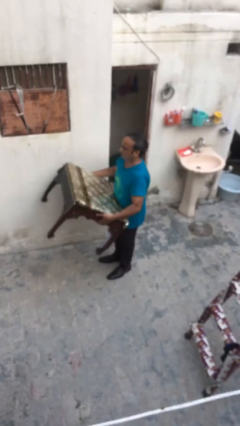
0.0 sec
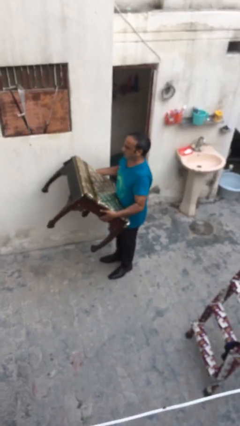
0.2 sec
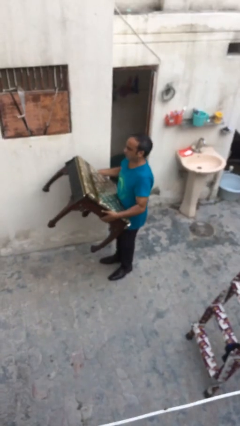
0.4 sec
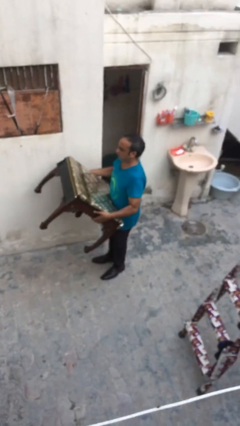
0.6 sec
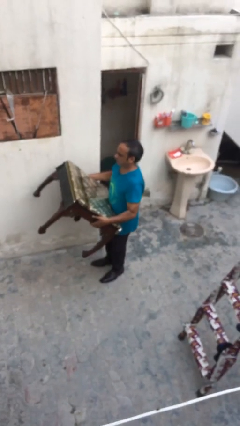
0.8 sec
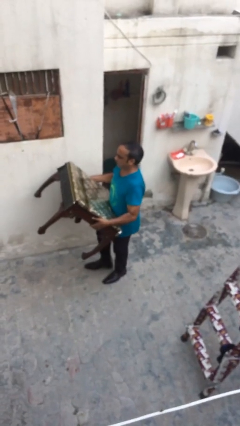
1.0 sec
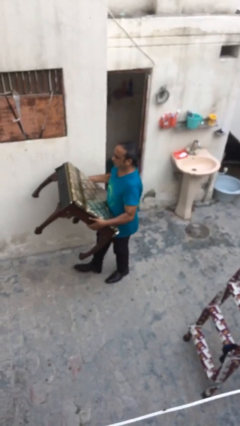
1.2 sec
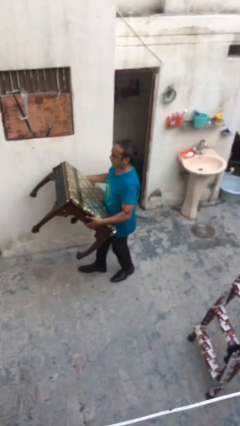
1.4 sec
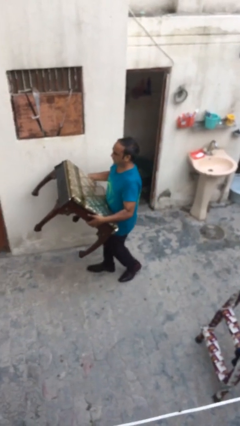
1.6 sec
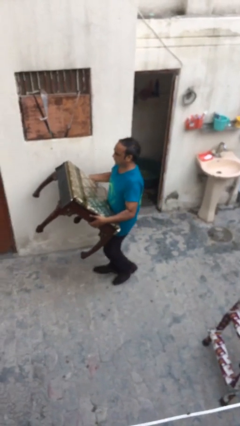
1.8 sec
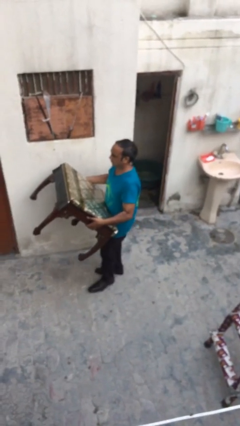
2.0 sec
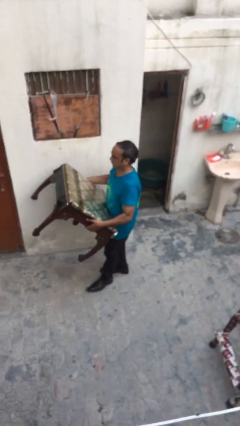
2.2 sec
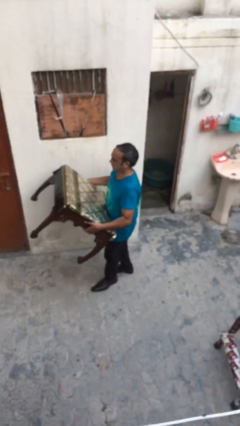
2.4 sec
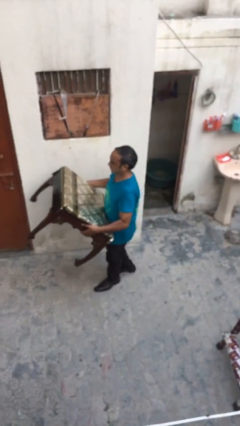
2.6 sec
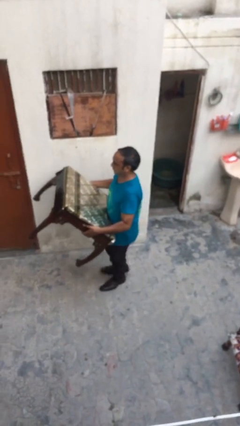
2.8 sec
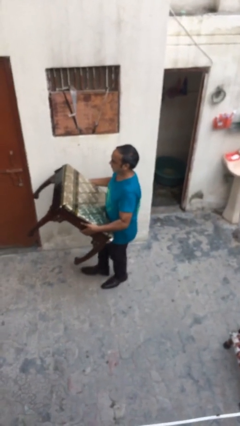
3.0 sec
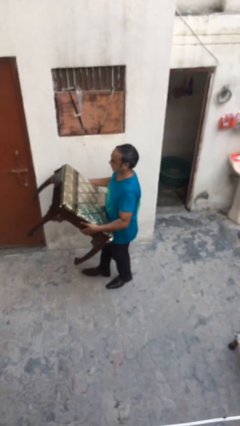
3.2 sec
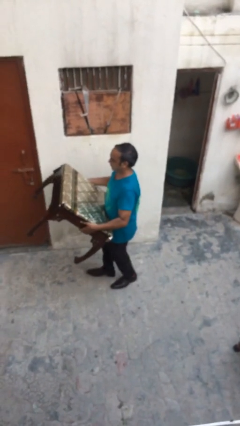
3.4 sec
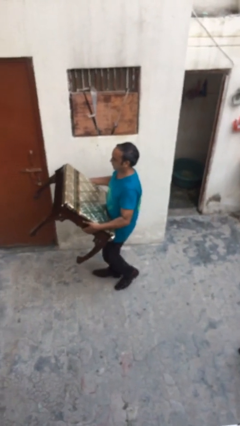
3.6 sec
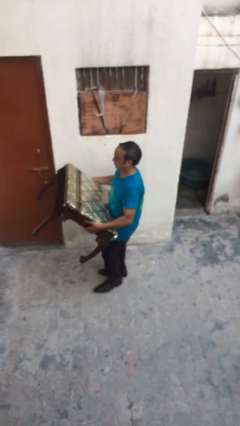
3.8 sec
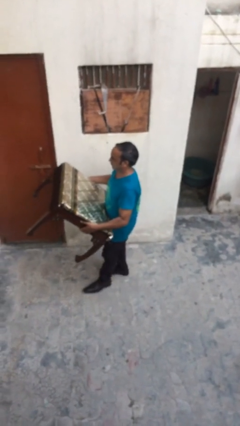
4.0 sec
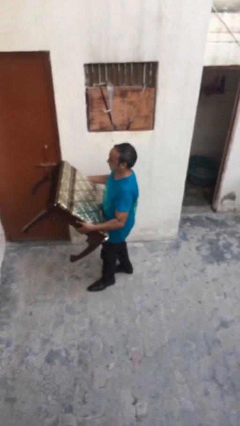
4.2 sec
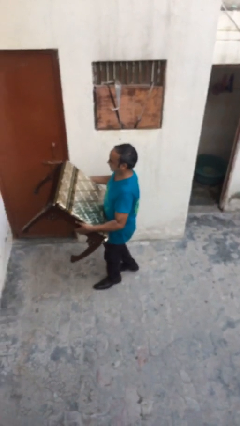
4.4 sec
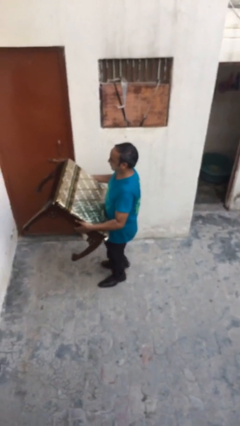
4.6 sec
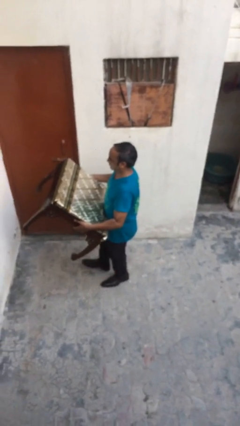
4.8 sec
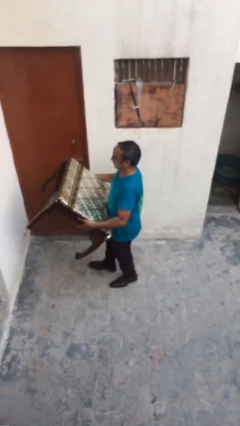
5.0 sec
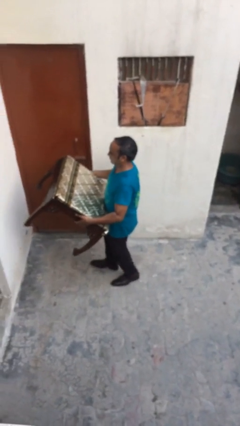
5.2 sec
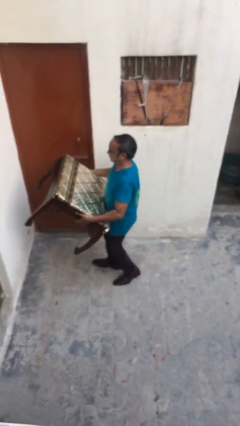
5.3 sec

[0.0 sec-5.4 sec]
person carries heavy object

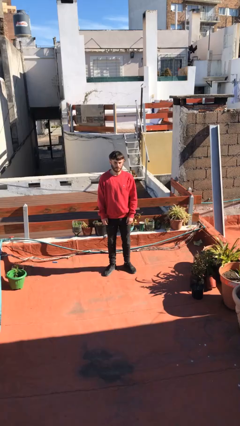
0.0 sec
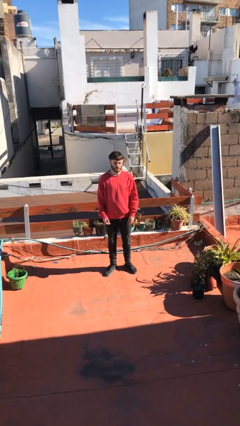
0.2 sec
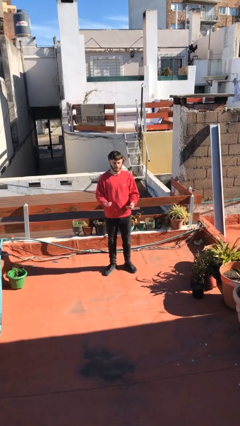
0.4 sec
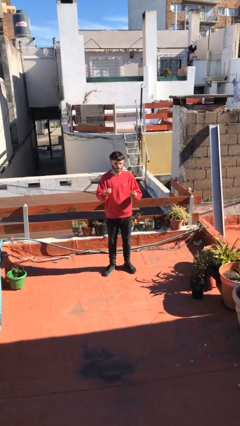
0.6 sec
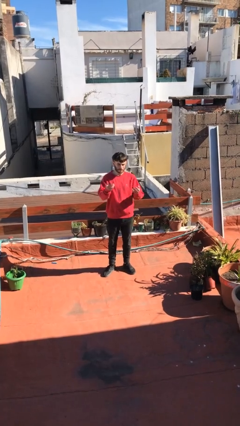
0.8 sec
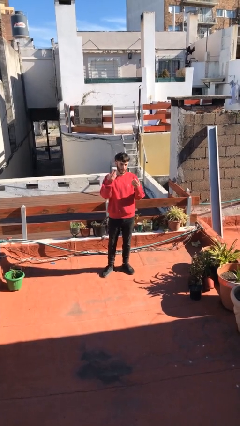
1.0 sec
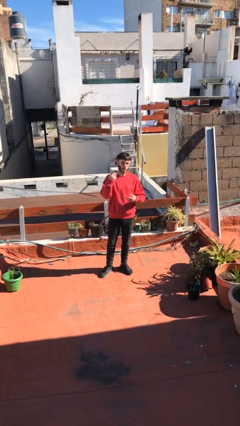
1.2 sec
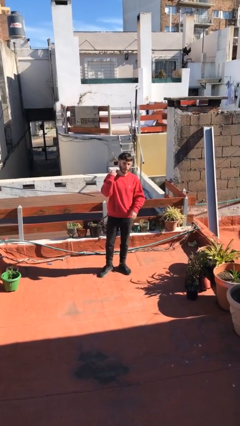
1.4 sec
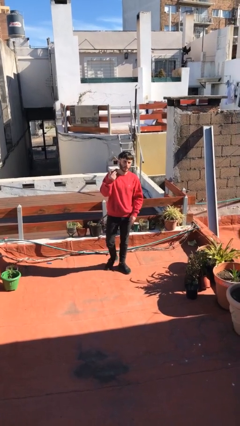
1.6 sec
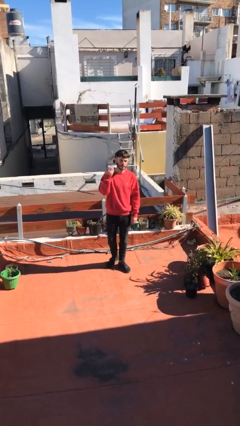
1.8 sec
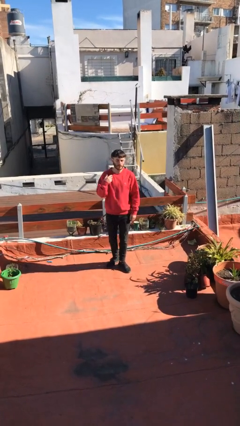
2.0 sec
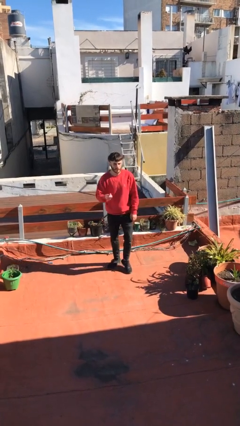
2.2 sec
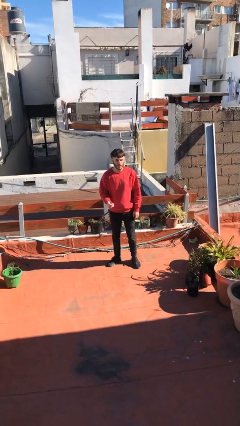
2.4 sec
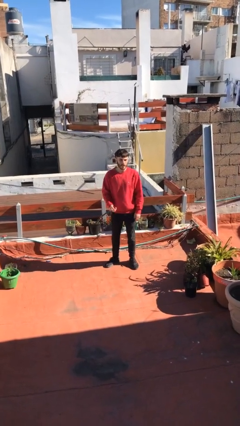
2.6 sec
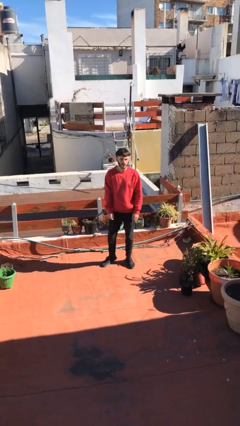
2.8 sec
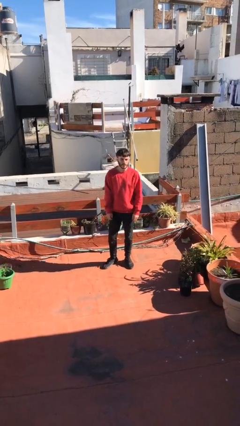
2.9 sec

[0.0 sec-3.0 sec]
person gestures come here

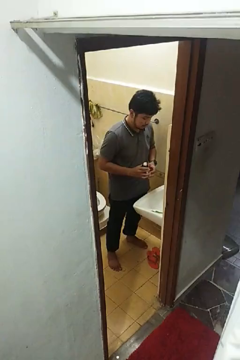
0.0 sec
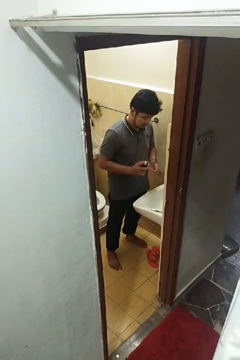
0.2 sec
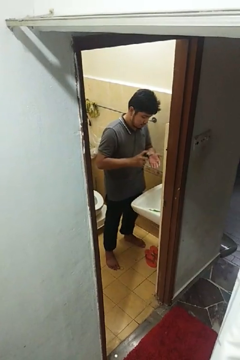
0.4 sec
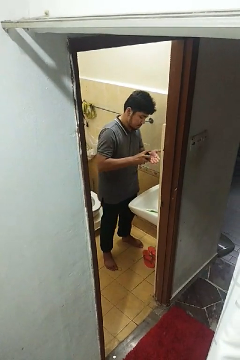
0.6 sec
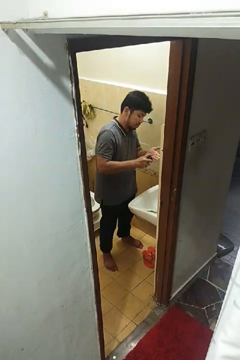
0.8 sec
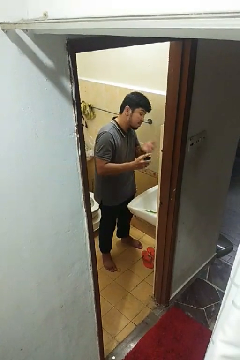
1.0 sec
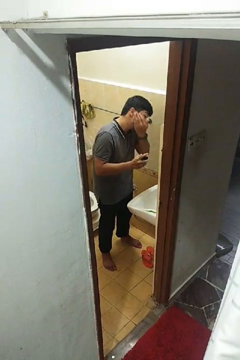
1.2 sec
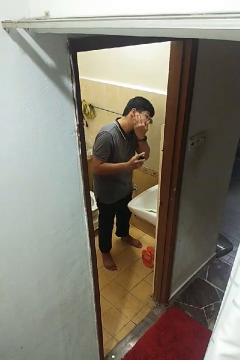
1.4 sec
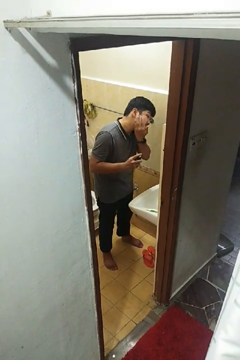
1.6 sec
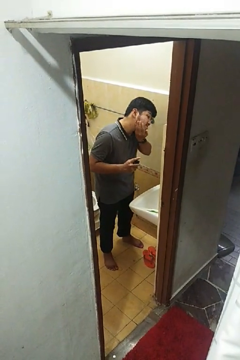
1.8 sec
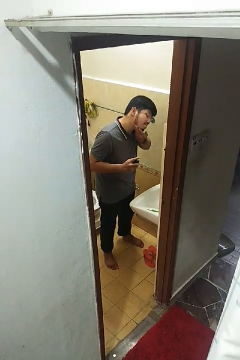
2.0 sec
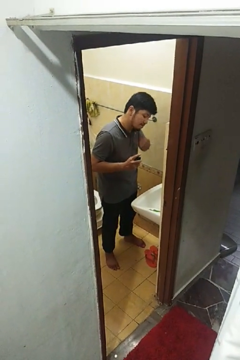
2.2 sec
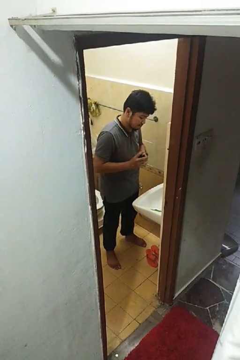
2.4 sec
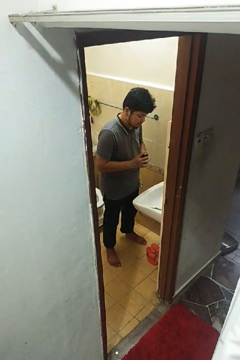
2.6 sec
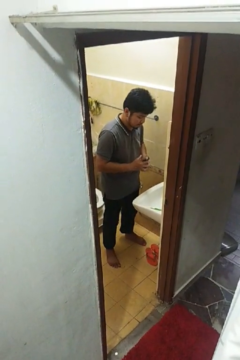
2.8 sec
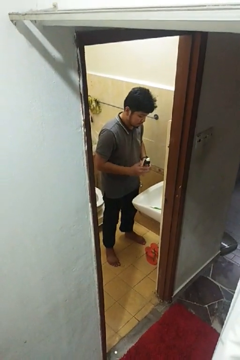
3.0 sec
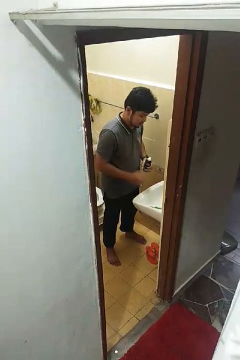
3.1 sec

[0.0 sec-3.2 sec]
person applies shaving cream

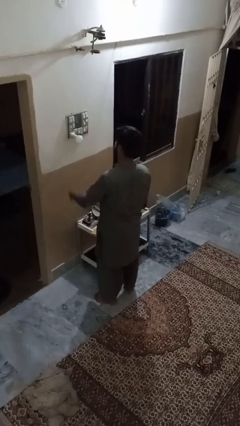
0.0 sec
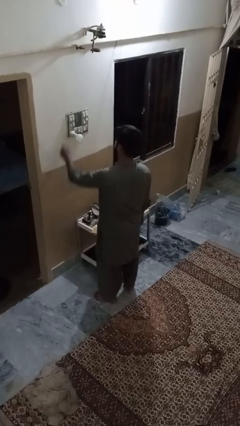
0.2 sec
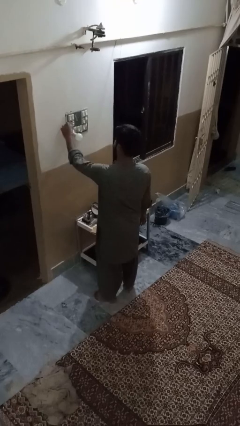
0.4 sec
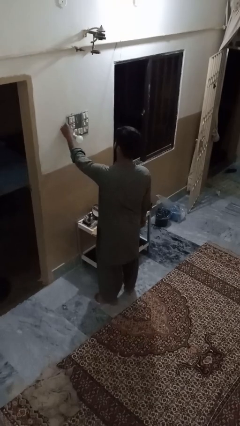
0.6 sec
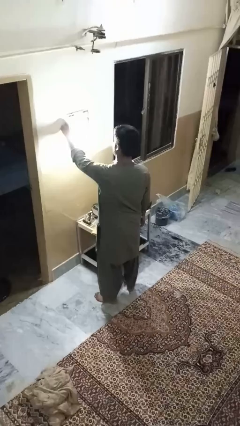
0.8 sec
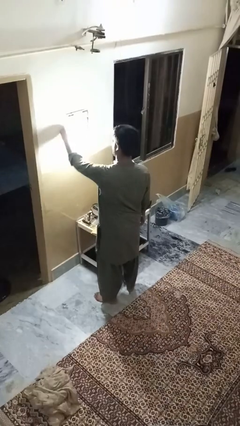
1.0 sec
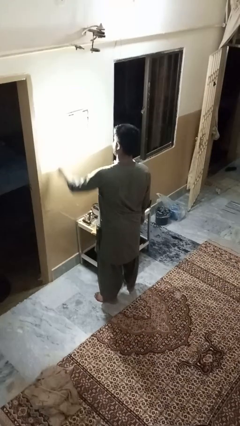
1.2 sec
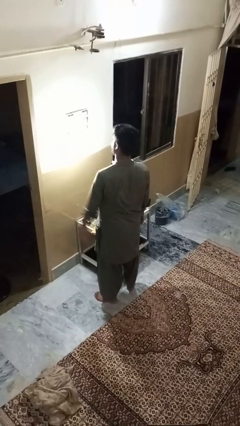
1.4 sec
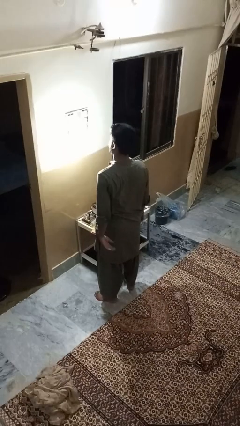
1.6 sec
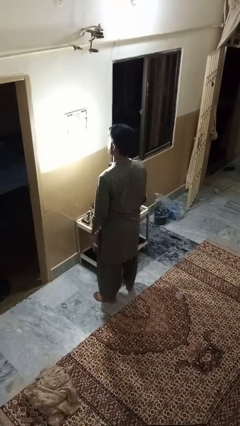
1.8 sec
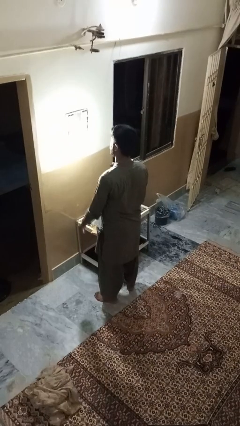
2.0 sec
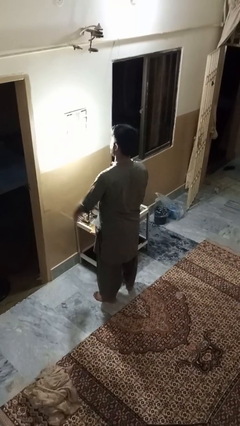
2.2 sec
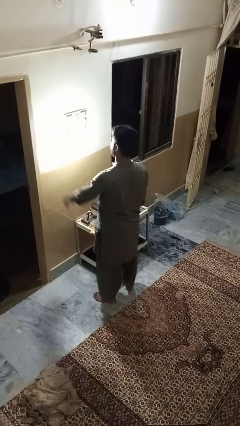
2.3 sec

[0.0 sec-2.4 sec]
person turns on lamp

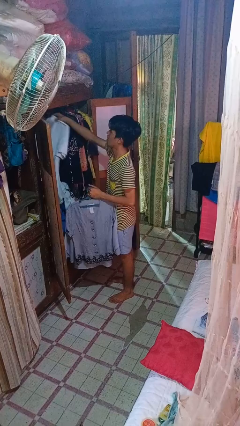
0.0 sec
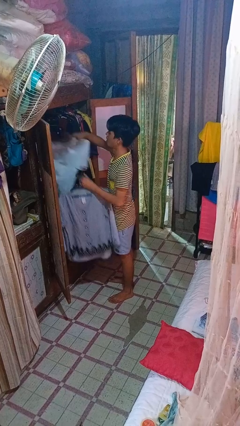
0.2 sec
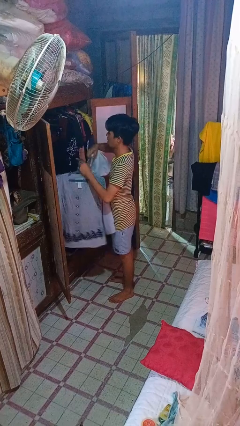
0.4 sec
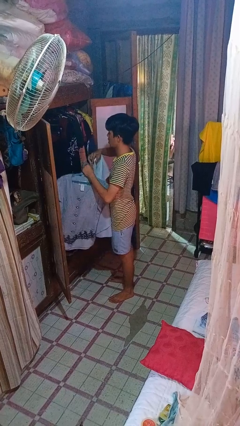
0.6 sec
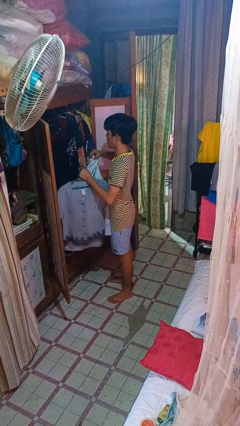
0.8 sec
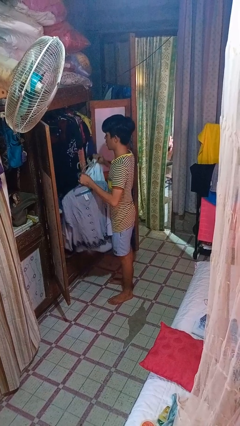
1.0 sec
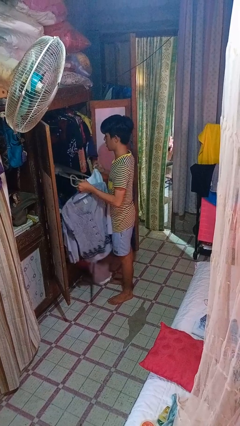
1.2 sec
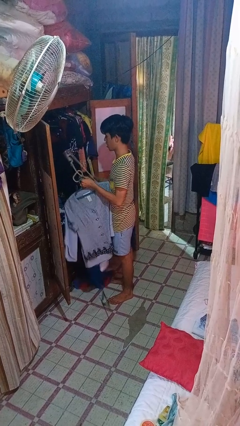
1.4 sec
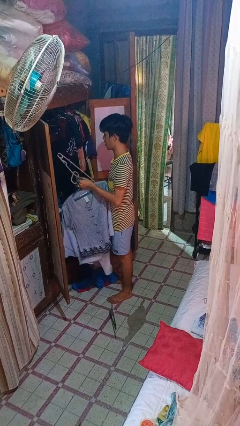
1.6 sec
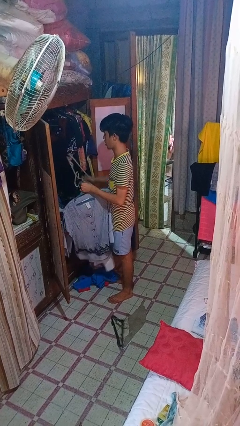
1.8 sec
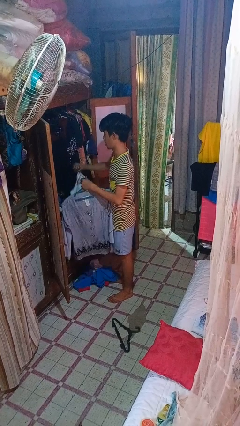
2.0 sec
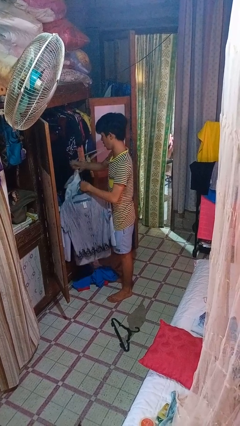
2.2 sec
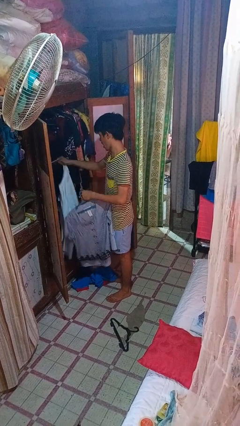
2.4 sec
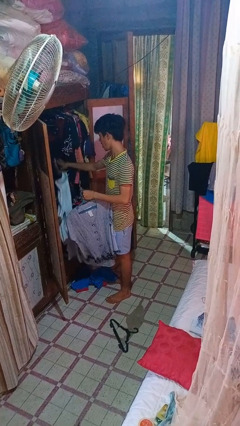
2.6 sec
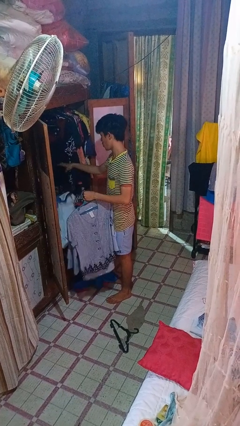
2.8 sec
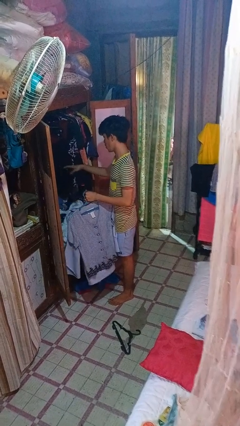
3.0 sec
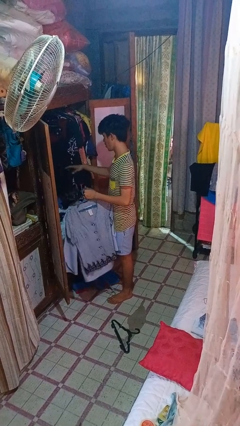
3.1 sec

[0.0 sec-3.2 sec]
person takes clothes from closet

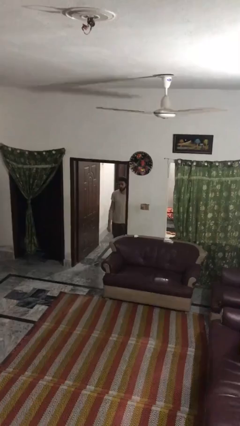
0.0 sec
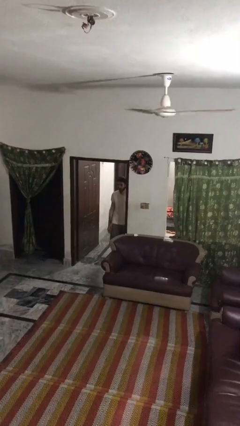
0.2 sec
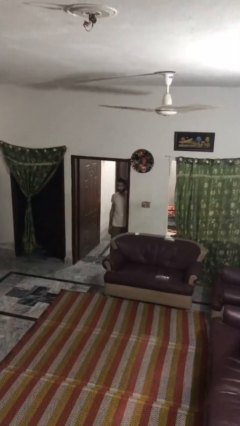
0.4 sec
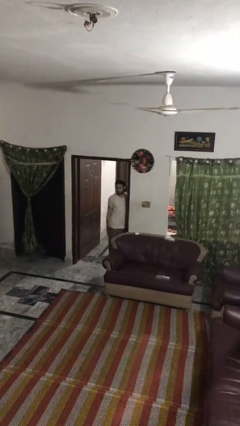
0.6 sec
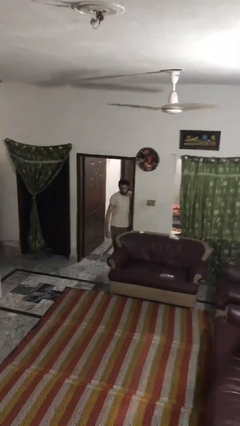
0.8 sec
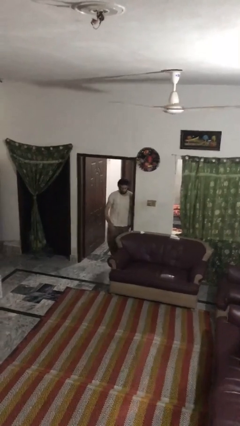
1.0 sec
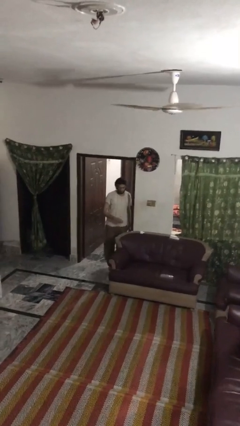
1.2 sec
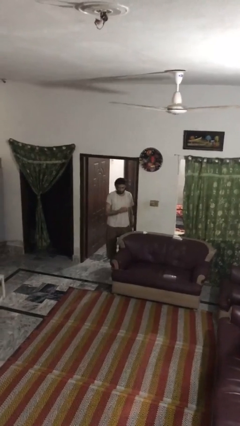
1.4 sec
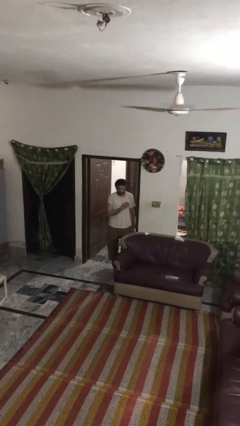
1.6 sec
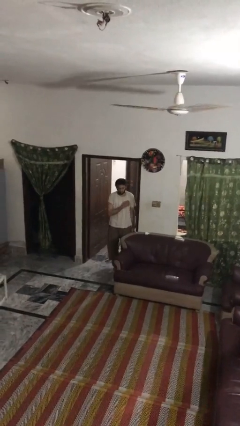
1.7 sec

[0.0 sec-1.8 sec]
person bumps into wall
